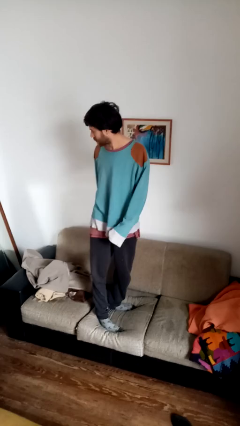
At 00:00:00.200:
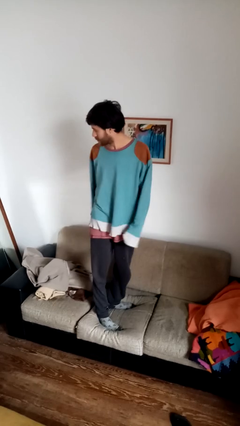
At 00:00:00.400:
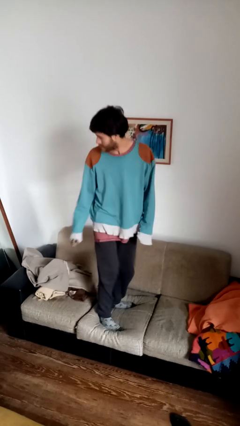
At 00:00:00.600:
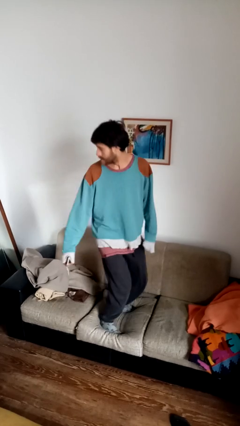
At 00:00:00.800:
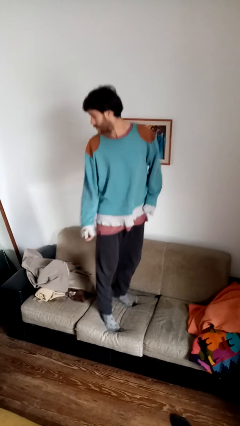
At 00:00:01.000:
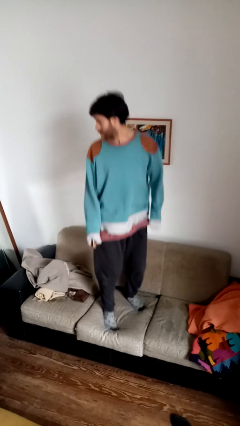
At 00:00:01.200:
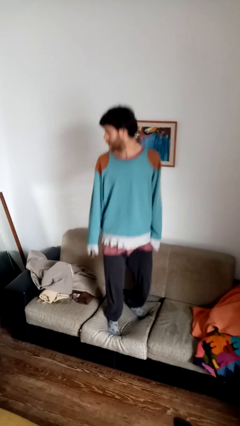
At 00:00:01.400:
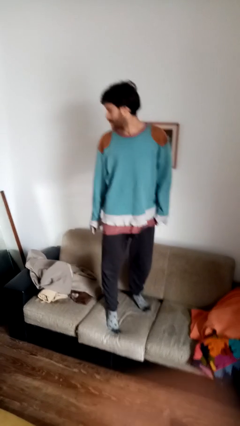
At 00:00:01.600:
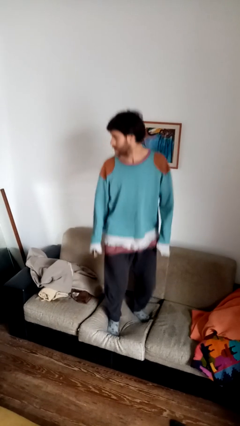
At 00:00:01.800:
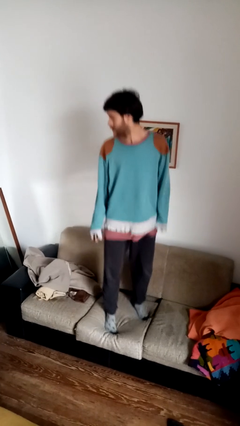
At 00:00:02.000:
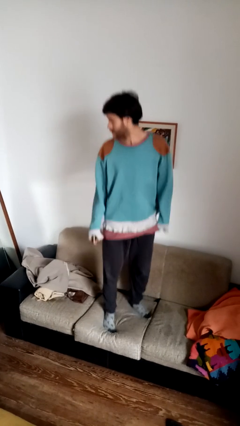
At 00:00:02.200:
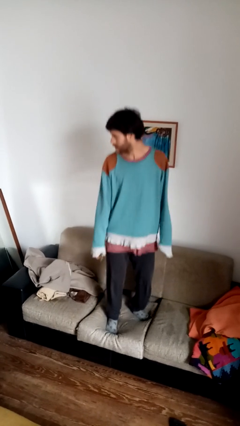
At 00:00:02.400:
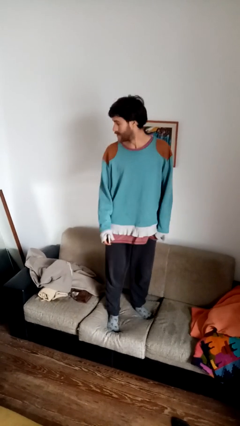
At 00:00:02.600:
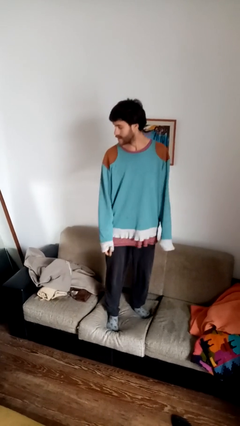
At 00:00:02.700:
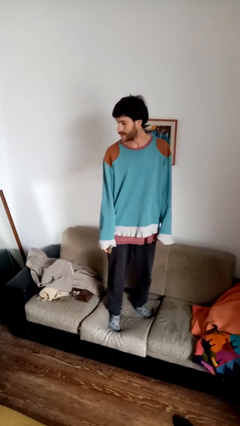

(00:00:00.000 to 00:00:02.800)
person jumps on couch

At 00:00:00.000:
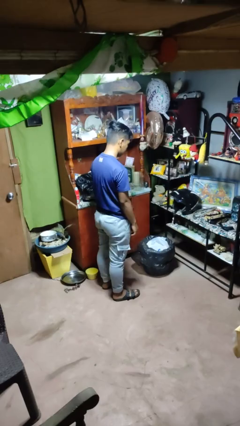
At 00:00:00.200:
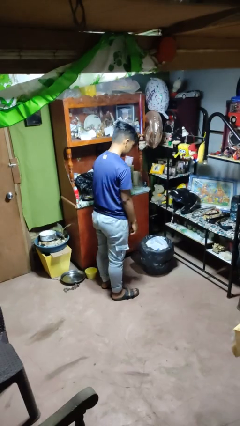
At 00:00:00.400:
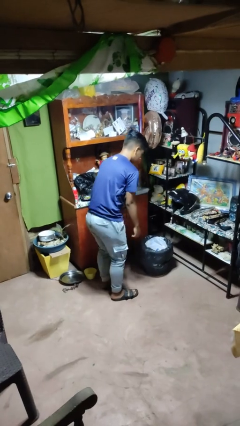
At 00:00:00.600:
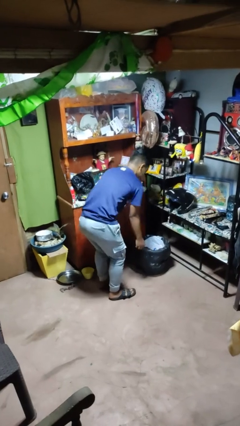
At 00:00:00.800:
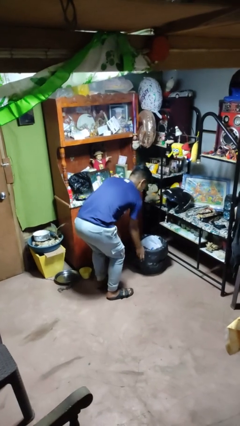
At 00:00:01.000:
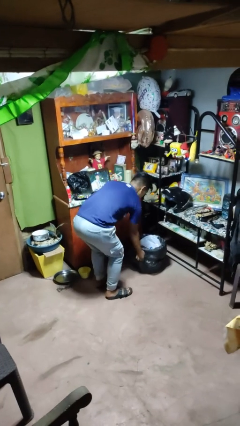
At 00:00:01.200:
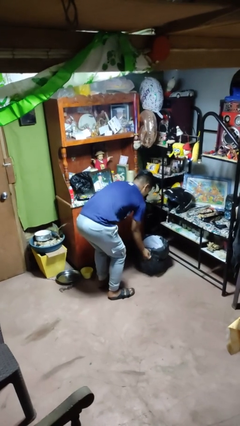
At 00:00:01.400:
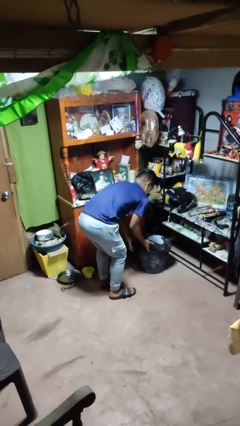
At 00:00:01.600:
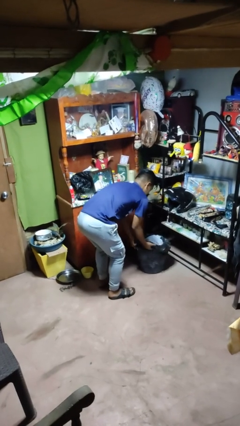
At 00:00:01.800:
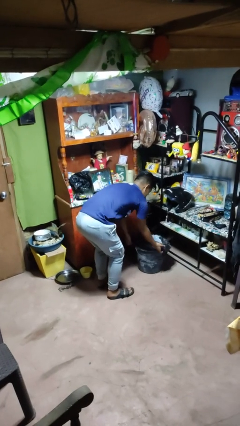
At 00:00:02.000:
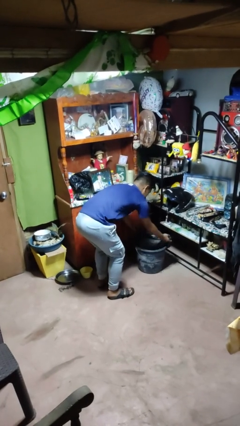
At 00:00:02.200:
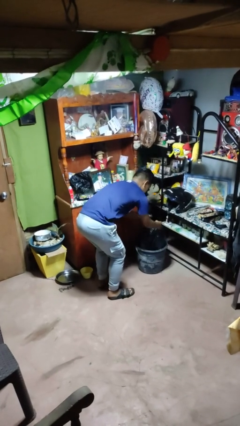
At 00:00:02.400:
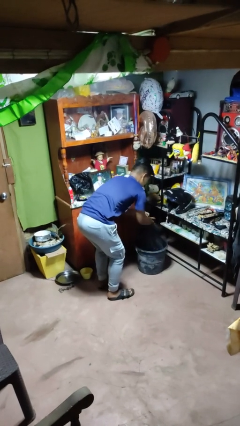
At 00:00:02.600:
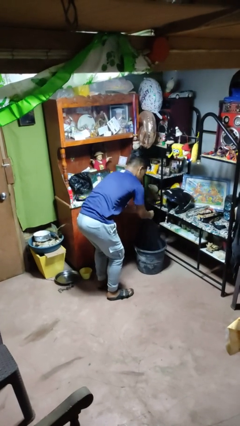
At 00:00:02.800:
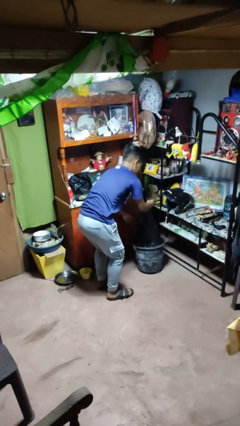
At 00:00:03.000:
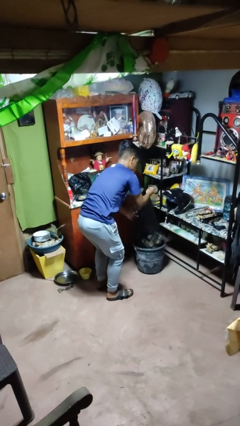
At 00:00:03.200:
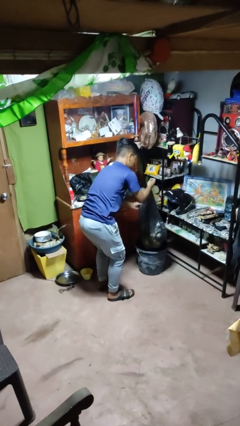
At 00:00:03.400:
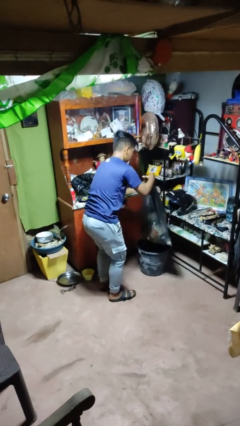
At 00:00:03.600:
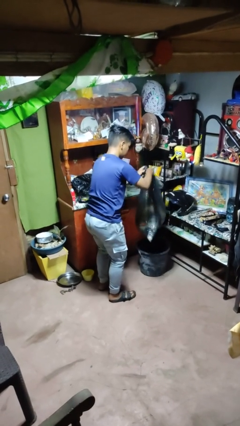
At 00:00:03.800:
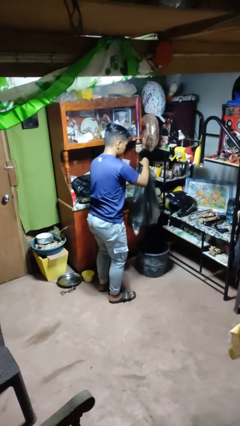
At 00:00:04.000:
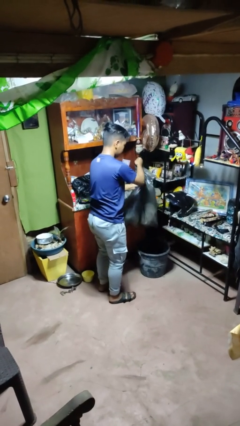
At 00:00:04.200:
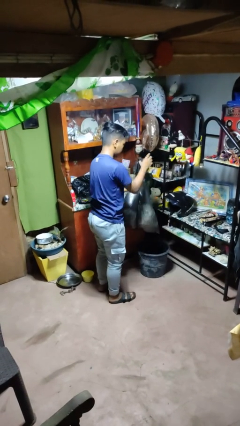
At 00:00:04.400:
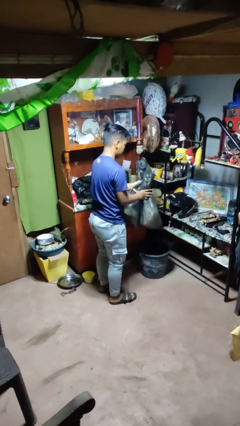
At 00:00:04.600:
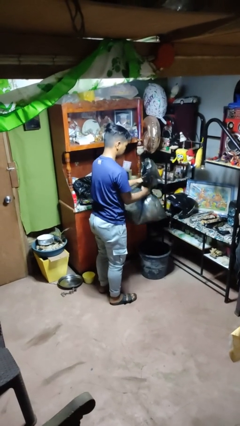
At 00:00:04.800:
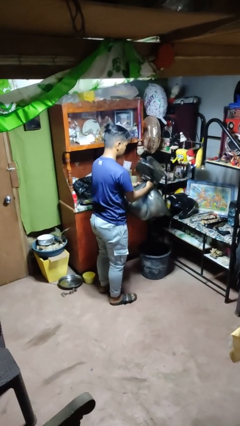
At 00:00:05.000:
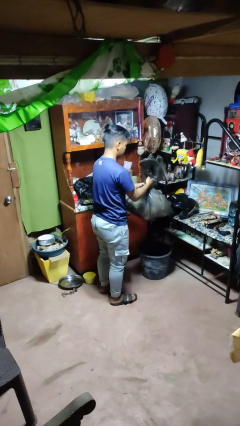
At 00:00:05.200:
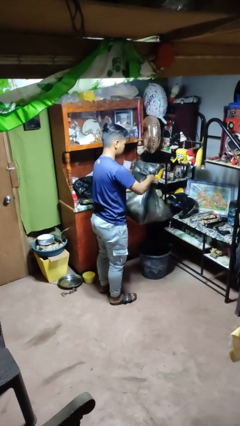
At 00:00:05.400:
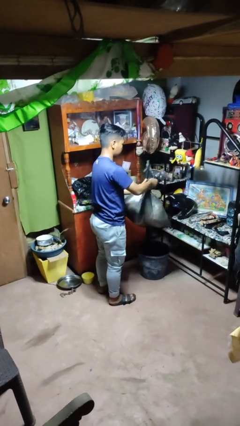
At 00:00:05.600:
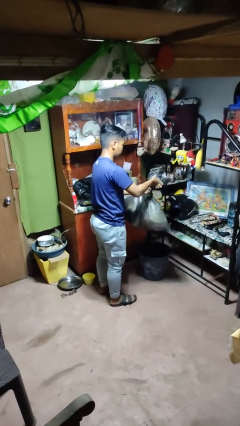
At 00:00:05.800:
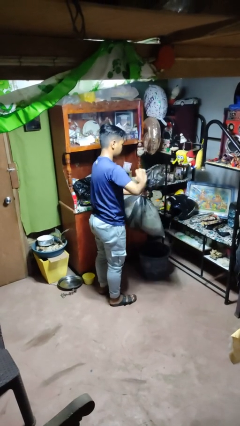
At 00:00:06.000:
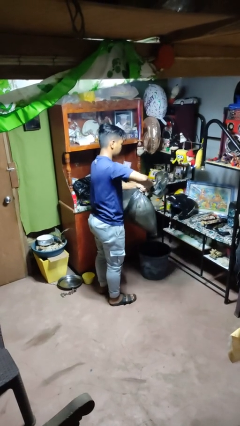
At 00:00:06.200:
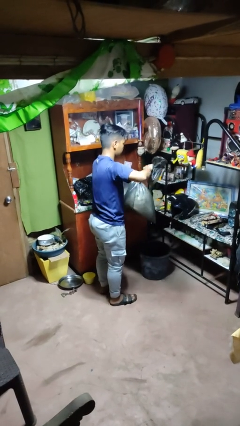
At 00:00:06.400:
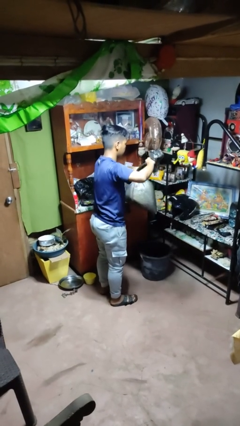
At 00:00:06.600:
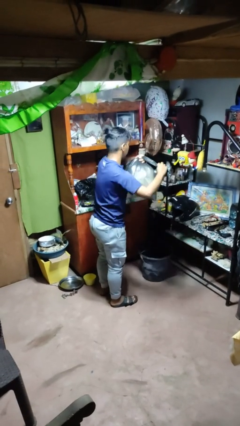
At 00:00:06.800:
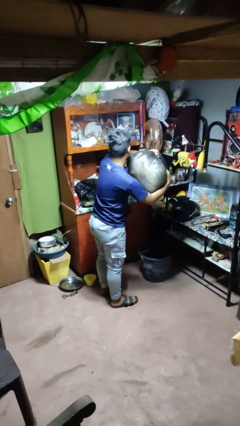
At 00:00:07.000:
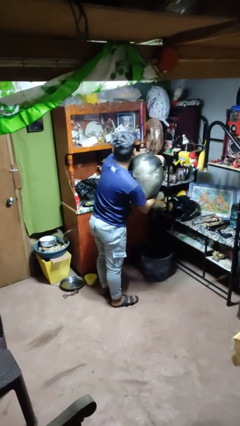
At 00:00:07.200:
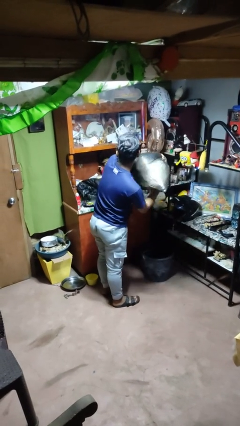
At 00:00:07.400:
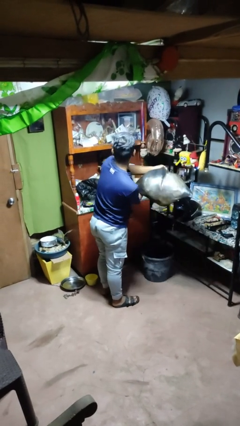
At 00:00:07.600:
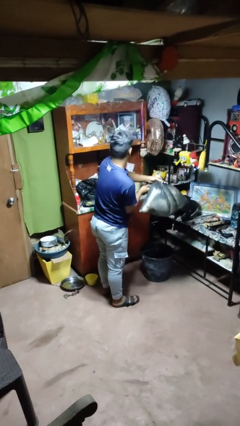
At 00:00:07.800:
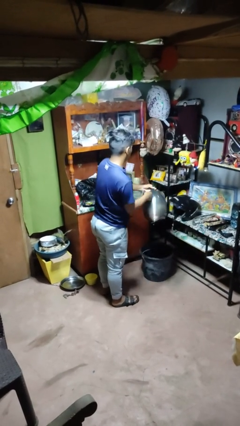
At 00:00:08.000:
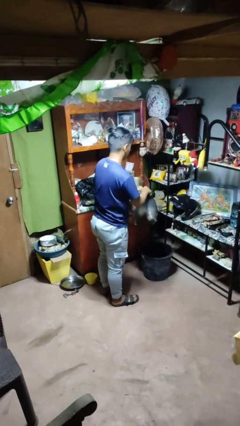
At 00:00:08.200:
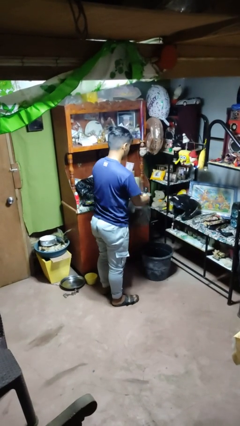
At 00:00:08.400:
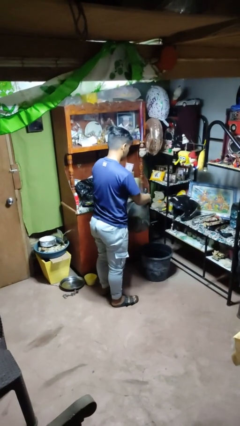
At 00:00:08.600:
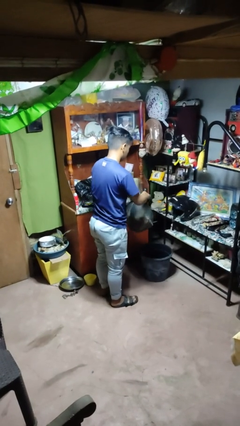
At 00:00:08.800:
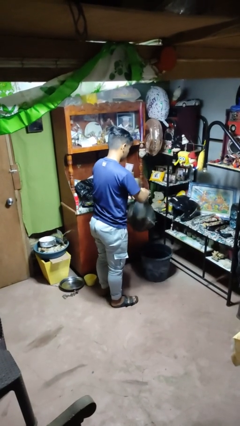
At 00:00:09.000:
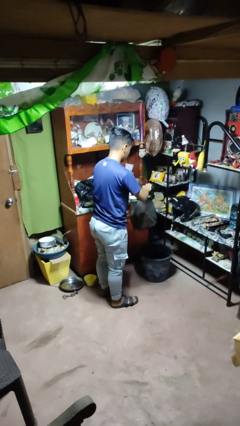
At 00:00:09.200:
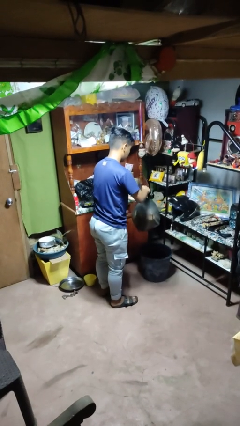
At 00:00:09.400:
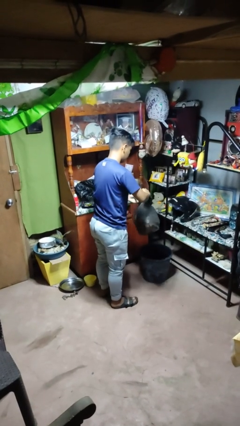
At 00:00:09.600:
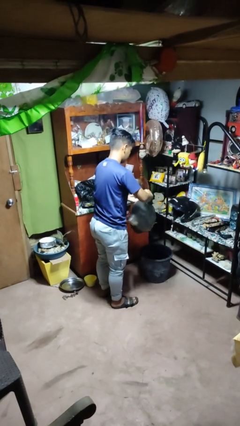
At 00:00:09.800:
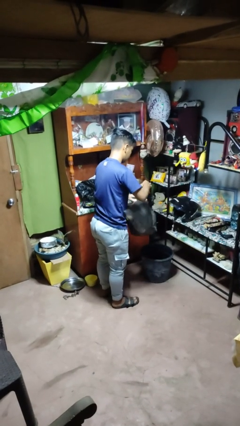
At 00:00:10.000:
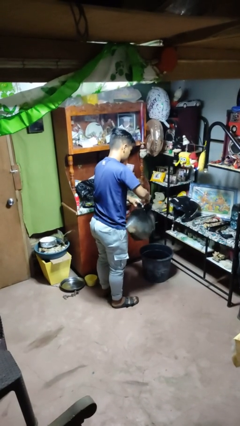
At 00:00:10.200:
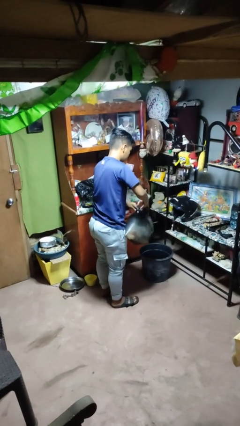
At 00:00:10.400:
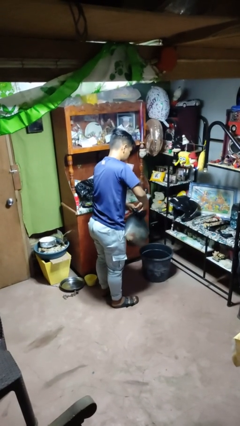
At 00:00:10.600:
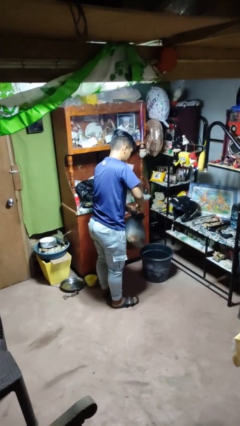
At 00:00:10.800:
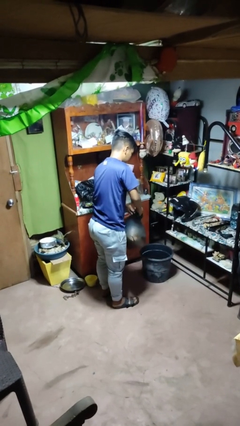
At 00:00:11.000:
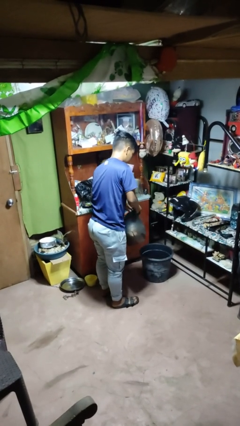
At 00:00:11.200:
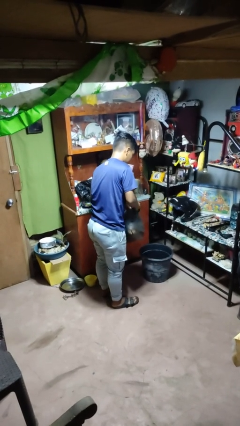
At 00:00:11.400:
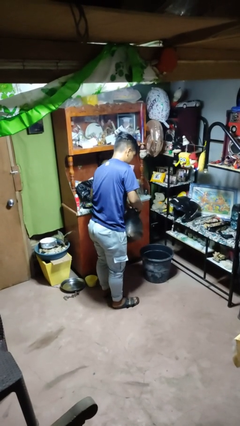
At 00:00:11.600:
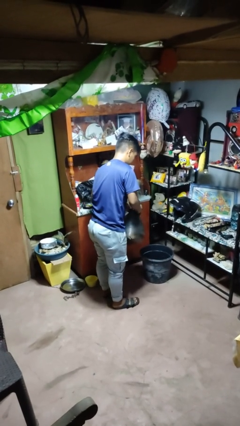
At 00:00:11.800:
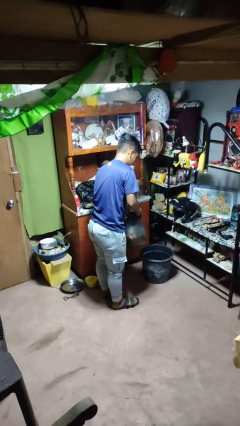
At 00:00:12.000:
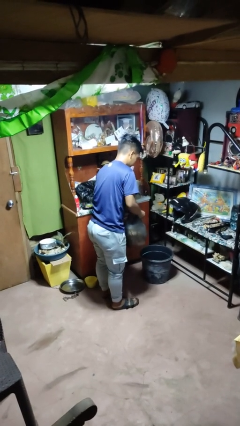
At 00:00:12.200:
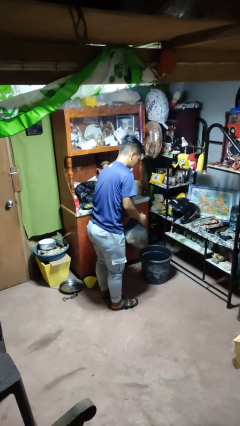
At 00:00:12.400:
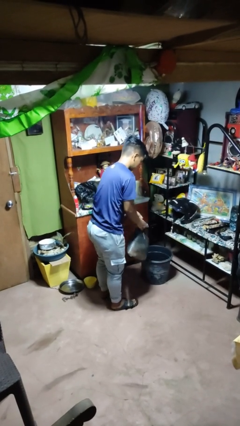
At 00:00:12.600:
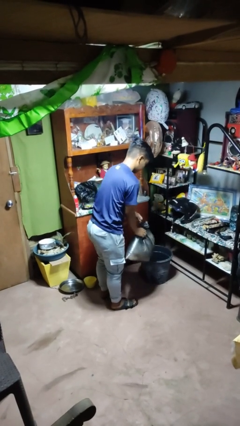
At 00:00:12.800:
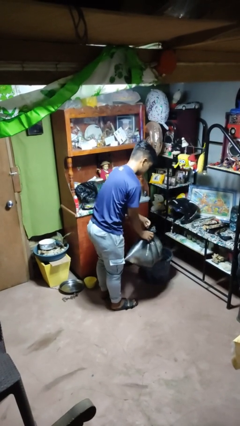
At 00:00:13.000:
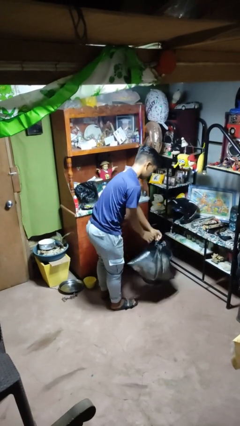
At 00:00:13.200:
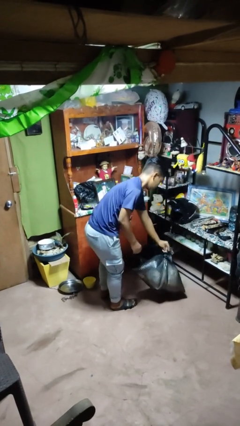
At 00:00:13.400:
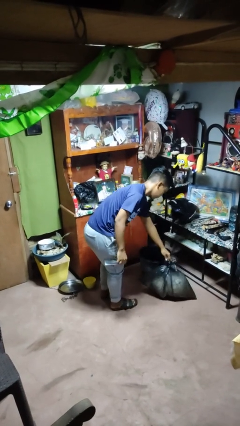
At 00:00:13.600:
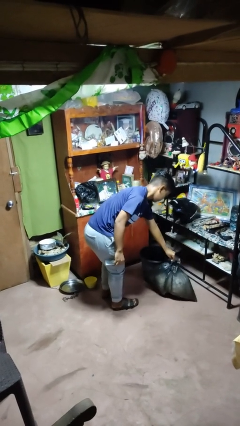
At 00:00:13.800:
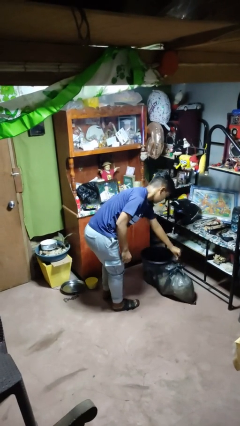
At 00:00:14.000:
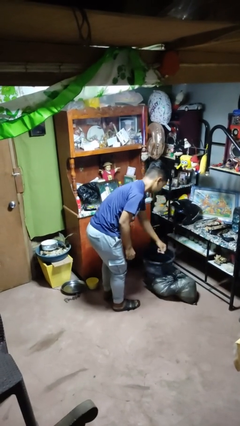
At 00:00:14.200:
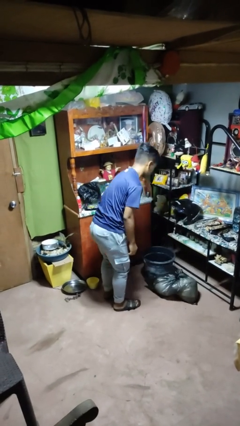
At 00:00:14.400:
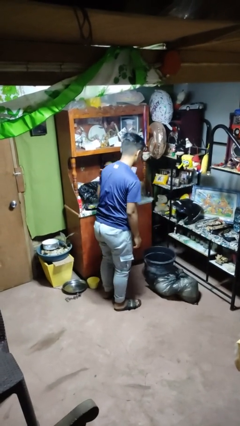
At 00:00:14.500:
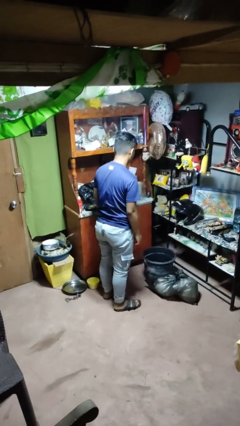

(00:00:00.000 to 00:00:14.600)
person removes trashbag from trashcan

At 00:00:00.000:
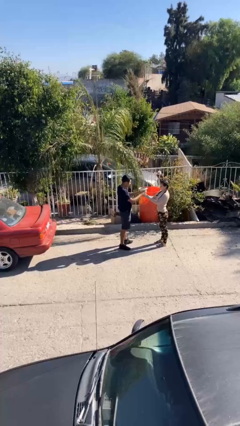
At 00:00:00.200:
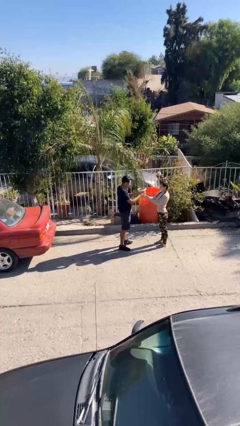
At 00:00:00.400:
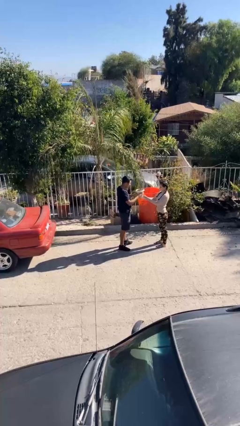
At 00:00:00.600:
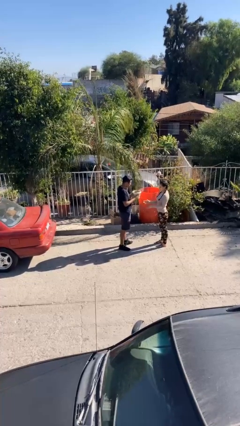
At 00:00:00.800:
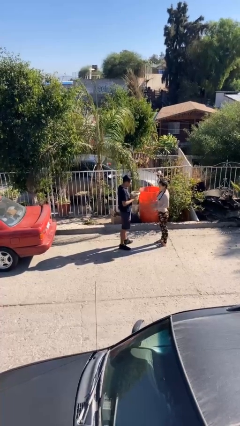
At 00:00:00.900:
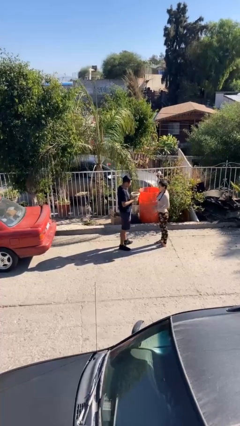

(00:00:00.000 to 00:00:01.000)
person transfers object to person
